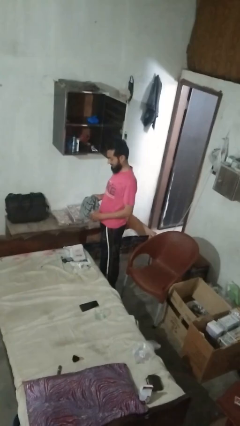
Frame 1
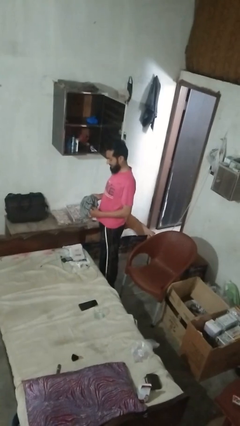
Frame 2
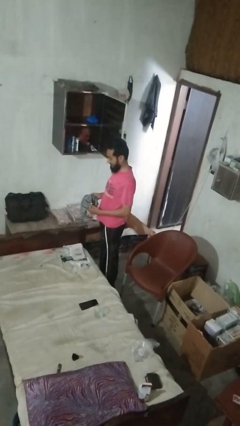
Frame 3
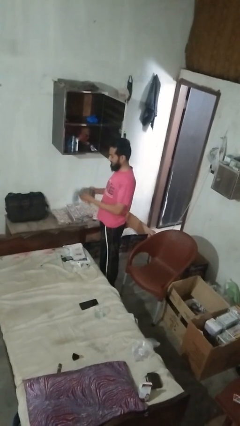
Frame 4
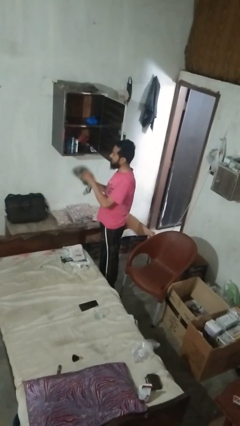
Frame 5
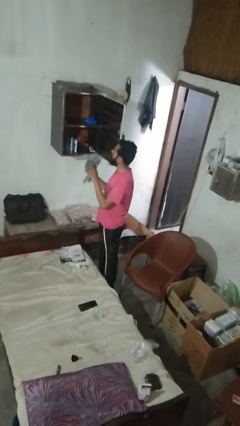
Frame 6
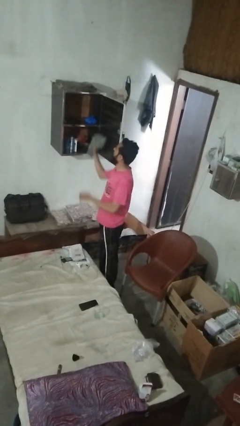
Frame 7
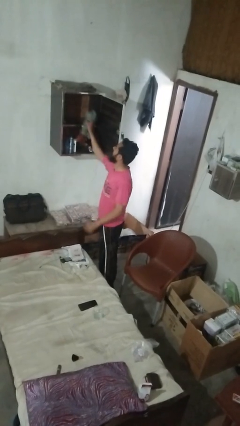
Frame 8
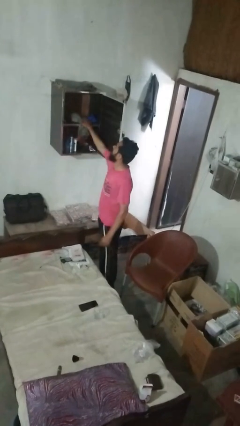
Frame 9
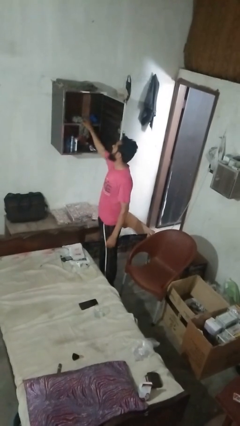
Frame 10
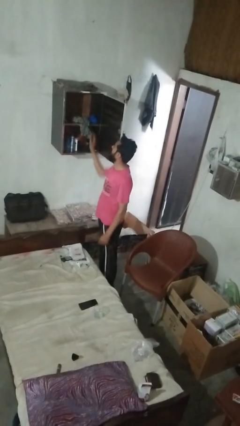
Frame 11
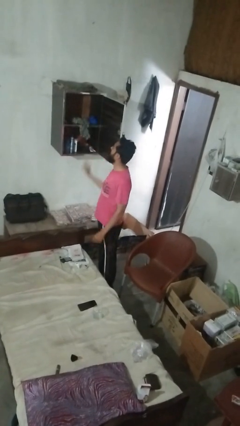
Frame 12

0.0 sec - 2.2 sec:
person puts clothes into dresser

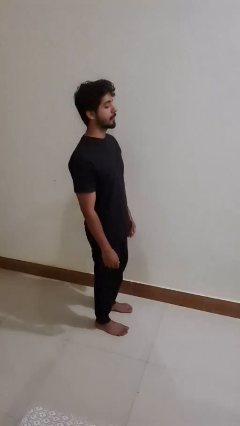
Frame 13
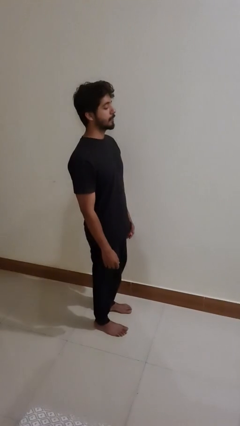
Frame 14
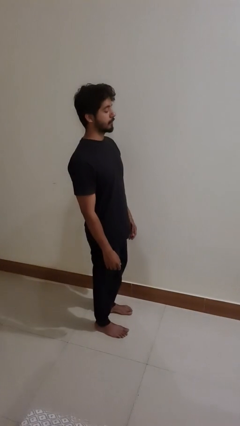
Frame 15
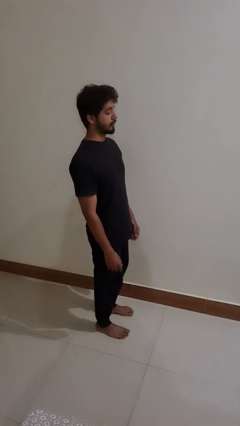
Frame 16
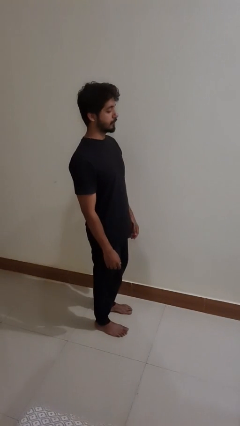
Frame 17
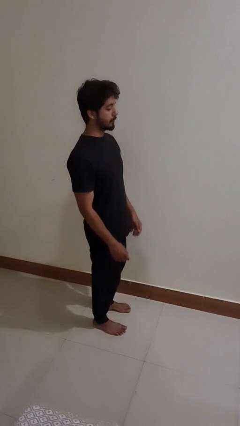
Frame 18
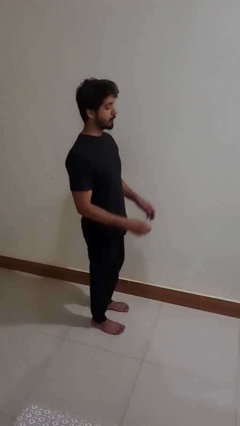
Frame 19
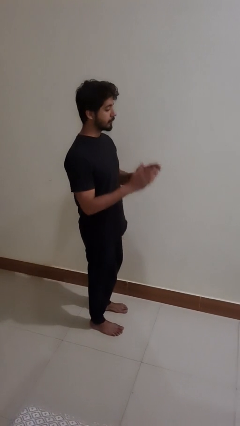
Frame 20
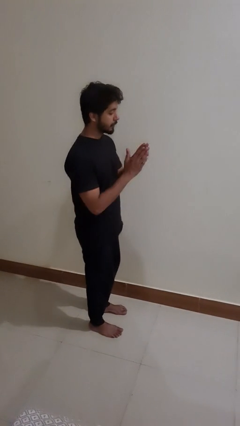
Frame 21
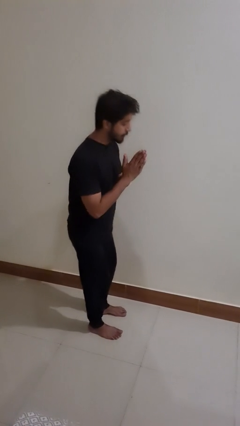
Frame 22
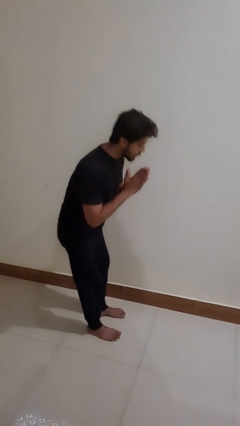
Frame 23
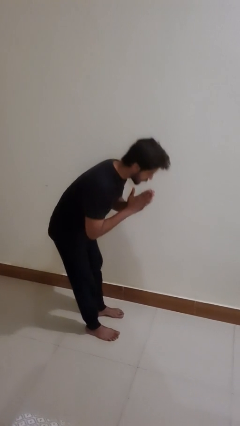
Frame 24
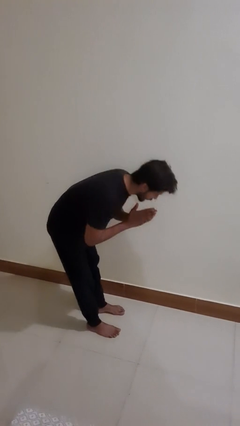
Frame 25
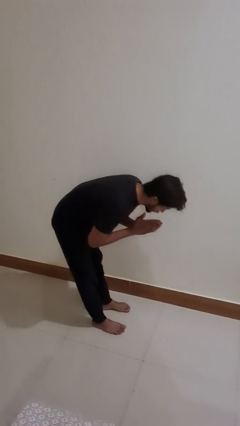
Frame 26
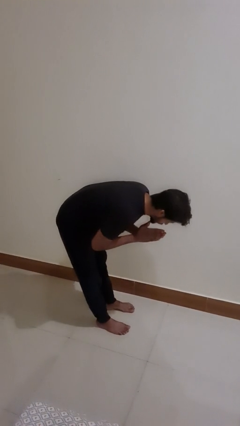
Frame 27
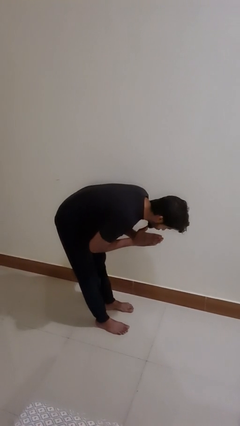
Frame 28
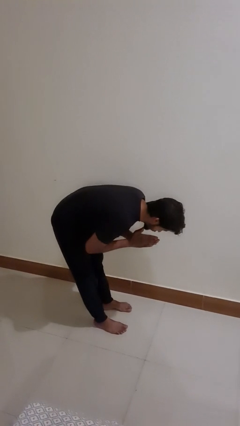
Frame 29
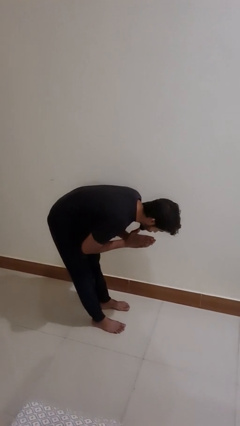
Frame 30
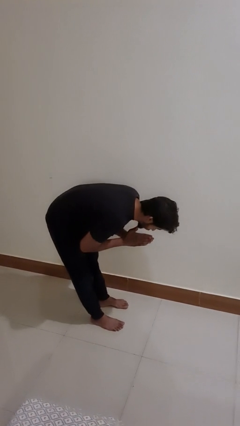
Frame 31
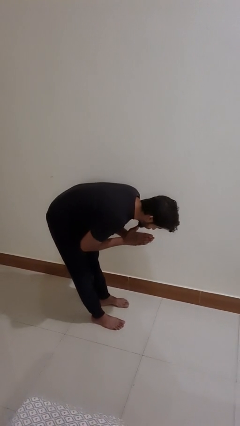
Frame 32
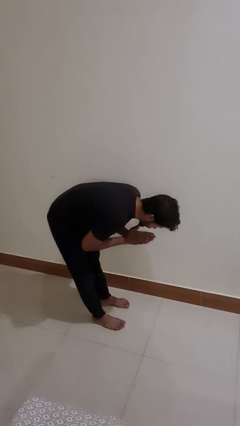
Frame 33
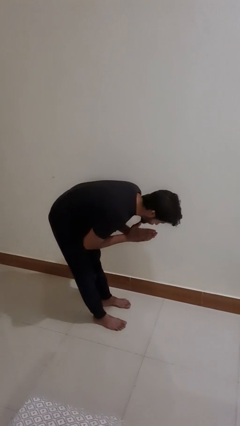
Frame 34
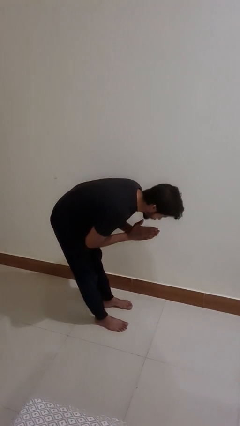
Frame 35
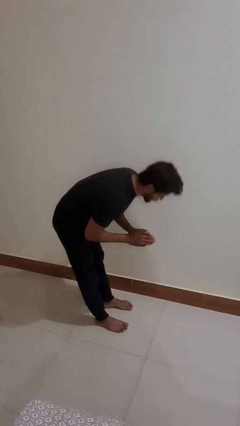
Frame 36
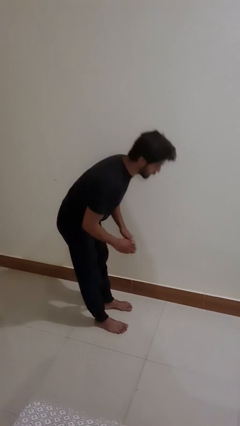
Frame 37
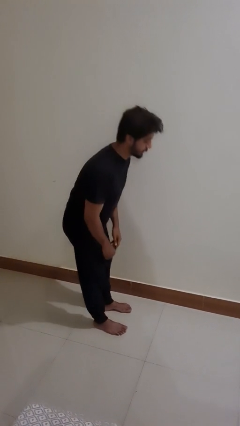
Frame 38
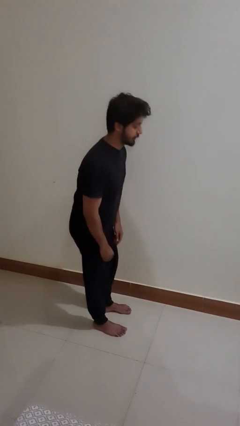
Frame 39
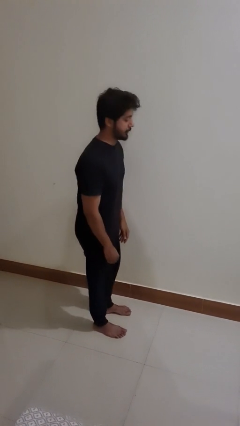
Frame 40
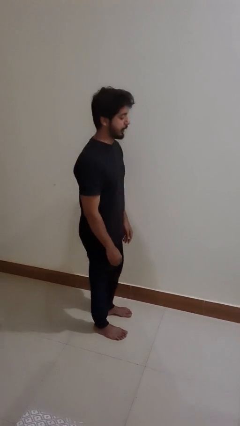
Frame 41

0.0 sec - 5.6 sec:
person bows

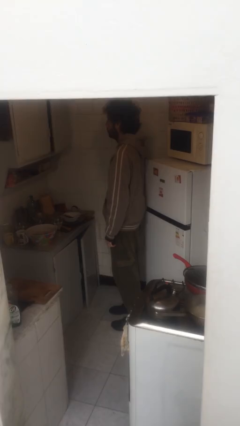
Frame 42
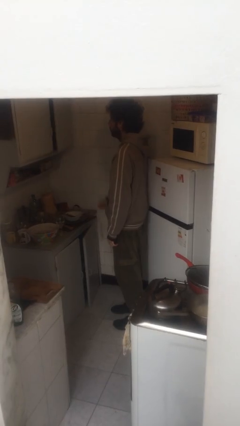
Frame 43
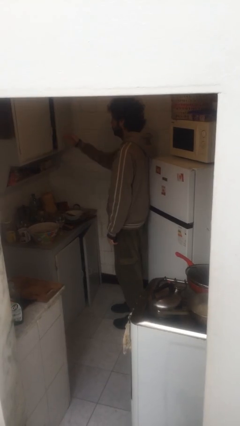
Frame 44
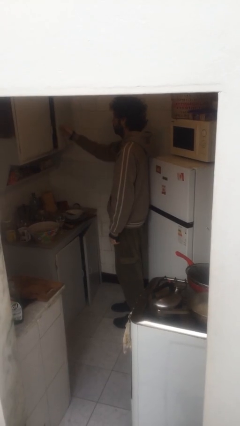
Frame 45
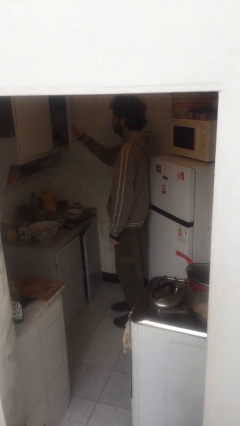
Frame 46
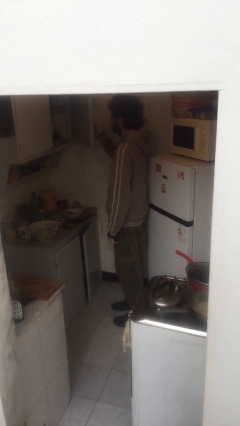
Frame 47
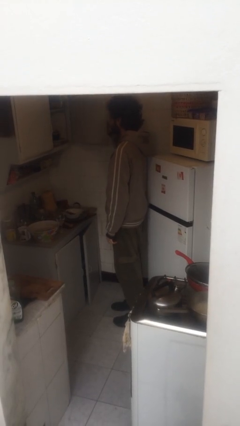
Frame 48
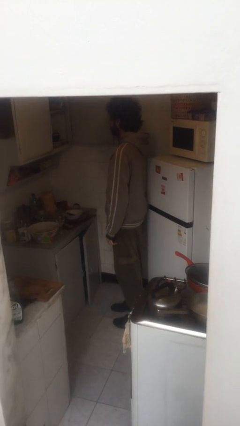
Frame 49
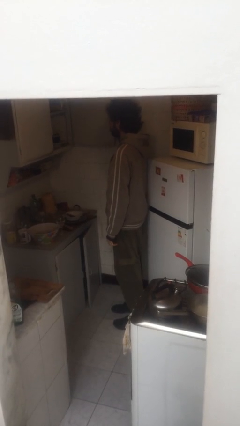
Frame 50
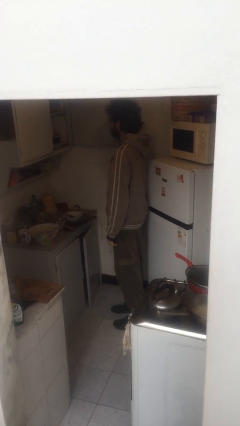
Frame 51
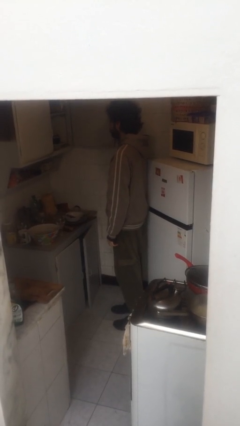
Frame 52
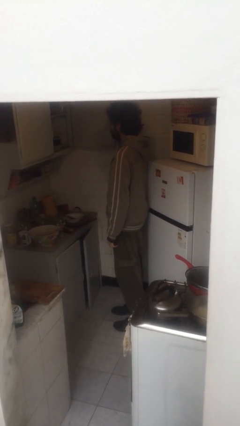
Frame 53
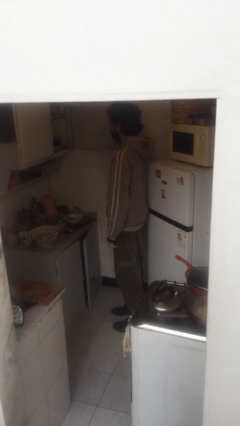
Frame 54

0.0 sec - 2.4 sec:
person opens cabinet

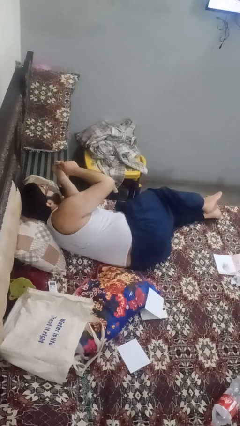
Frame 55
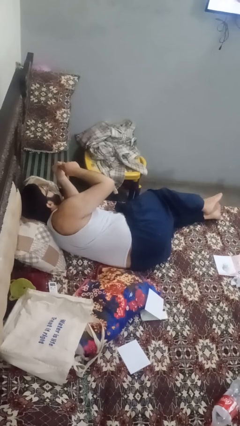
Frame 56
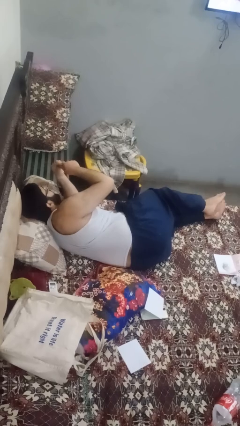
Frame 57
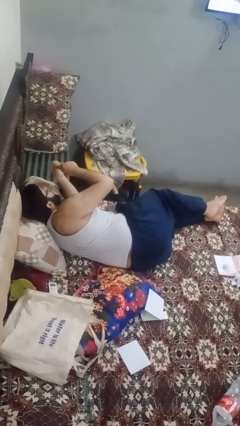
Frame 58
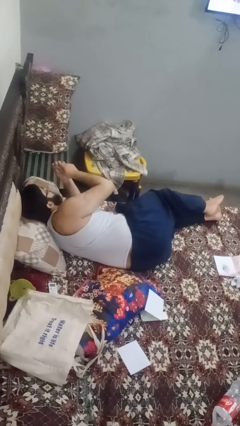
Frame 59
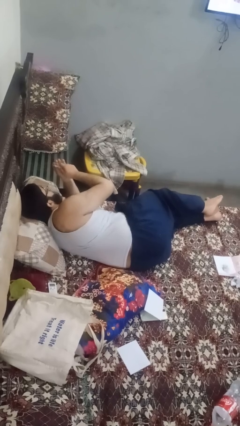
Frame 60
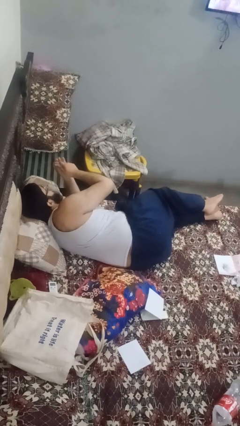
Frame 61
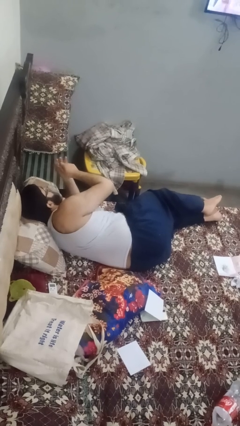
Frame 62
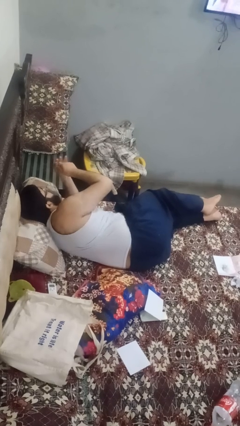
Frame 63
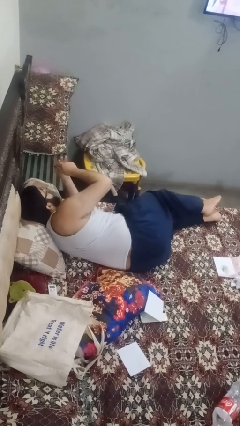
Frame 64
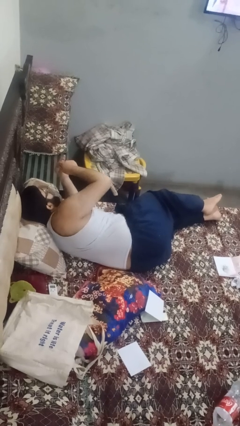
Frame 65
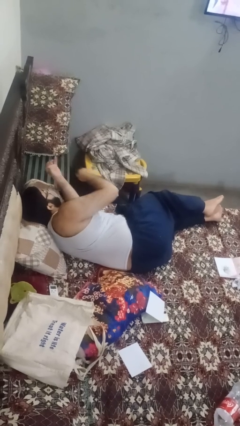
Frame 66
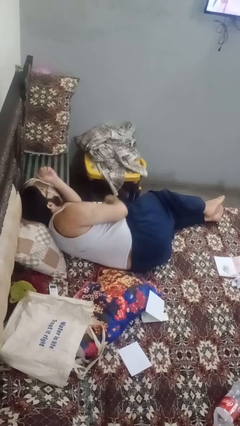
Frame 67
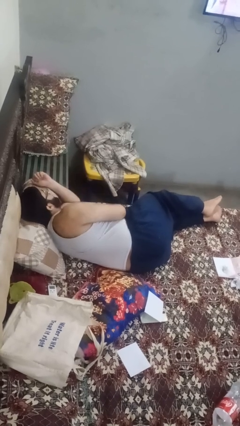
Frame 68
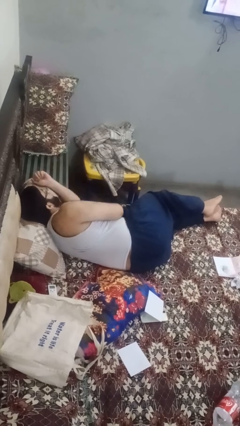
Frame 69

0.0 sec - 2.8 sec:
person files fingernails

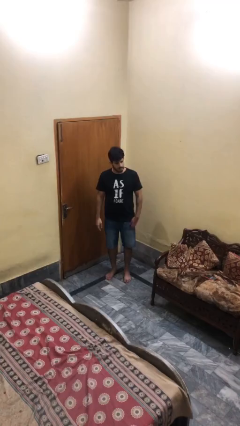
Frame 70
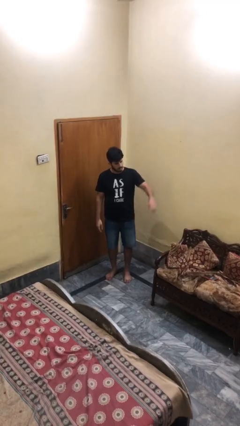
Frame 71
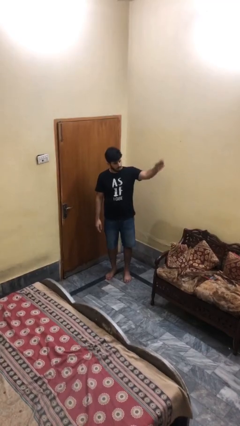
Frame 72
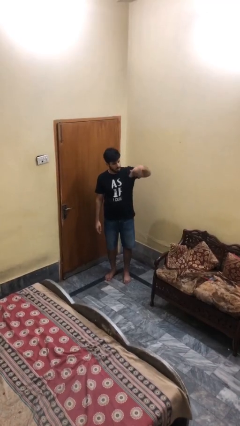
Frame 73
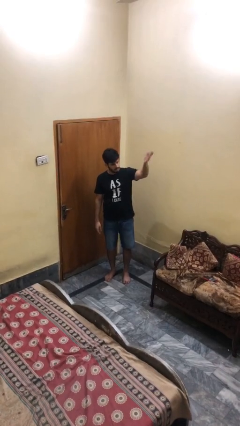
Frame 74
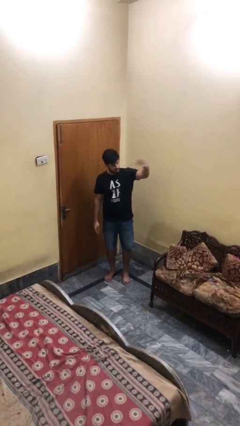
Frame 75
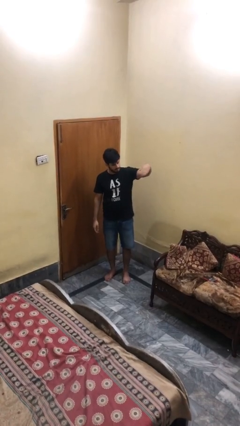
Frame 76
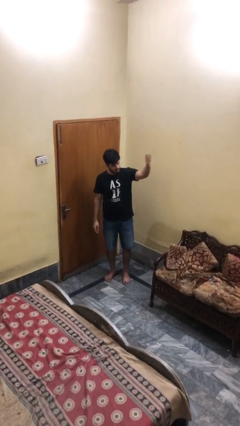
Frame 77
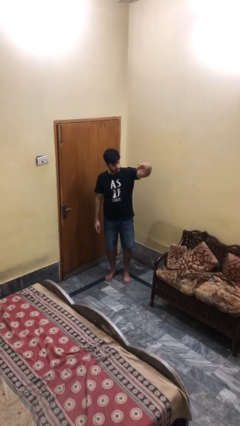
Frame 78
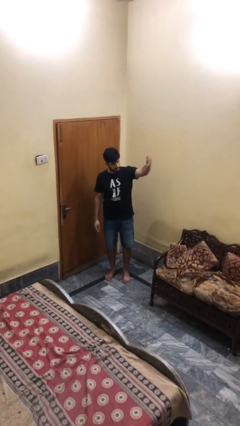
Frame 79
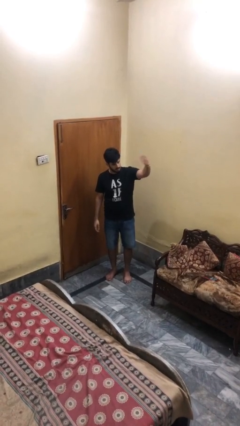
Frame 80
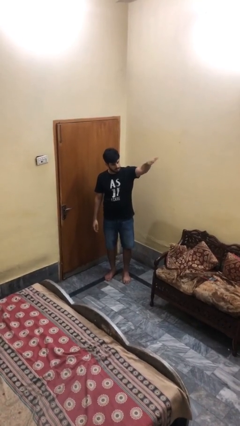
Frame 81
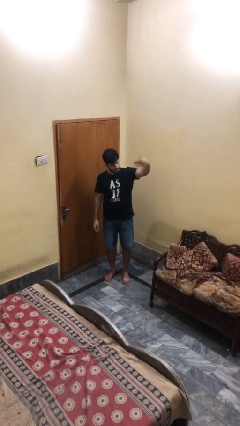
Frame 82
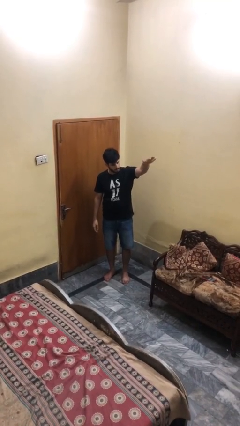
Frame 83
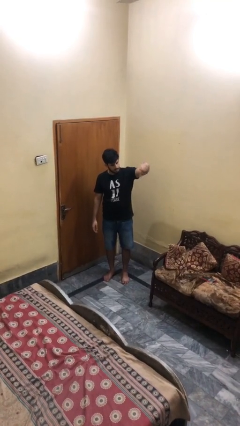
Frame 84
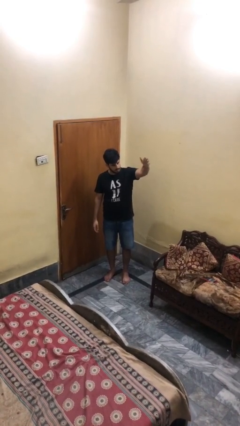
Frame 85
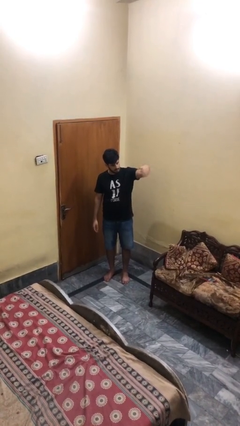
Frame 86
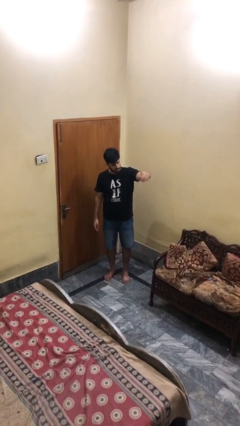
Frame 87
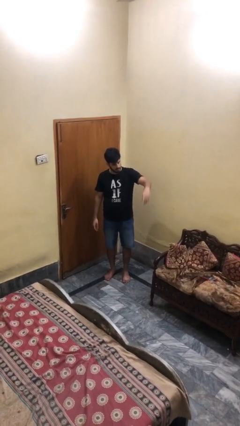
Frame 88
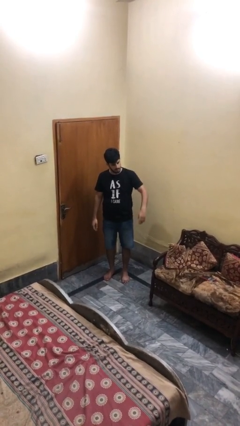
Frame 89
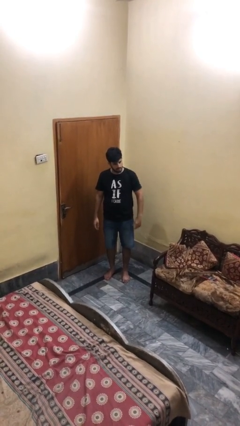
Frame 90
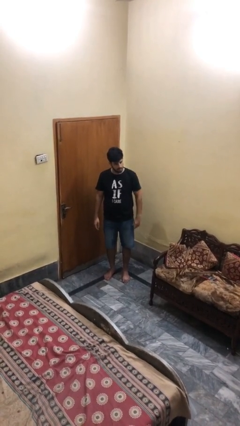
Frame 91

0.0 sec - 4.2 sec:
person gestures come here

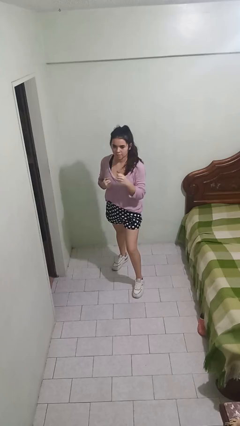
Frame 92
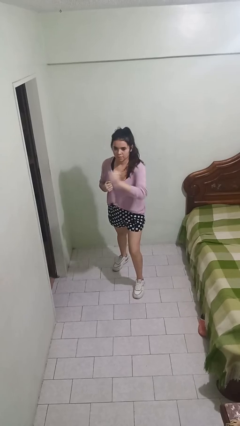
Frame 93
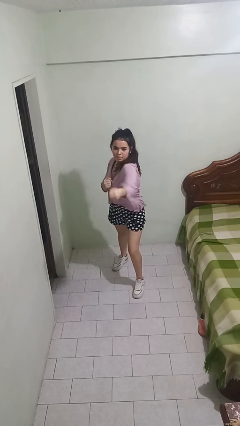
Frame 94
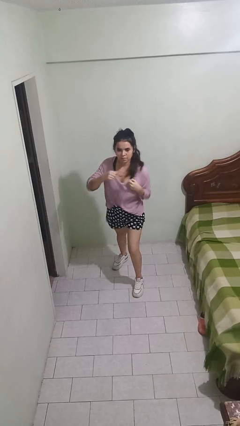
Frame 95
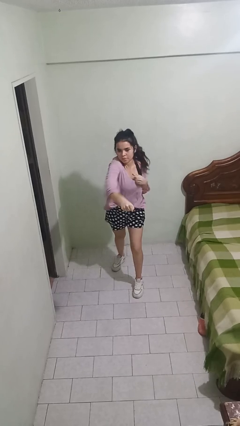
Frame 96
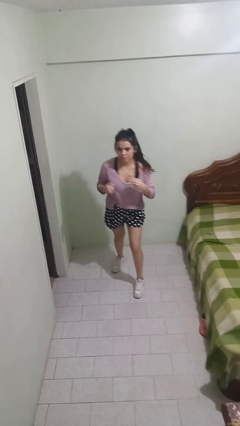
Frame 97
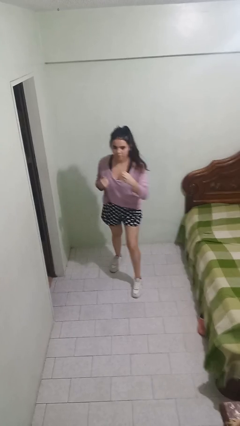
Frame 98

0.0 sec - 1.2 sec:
person karate chop
